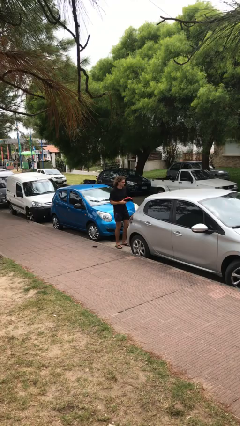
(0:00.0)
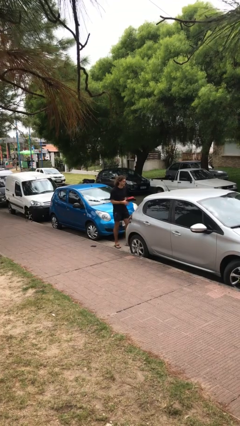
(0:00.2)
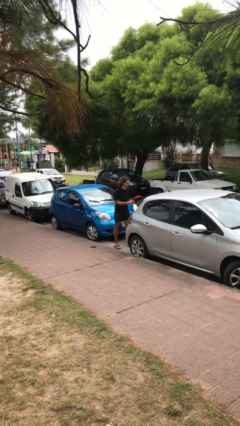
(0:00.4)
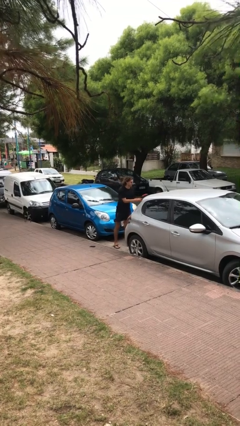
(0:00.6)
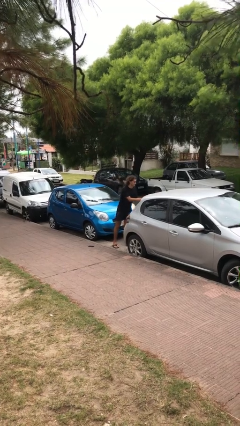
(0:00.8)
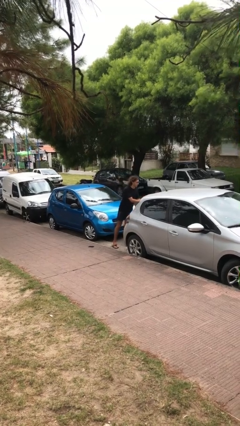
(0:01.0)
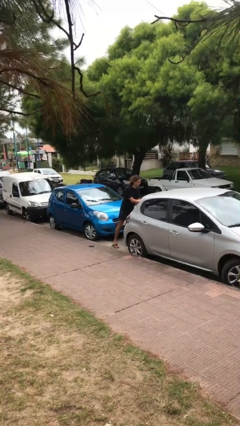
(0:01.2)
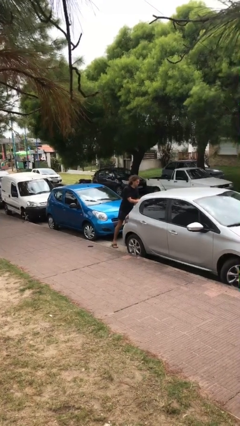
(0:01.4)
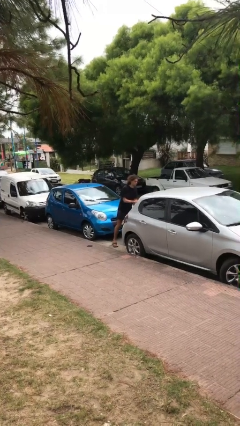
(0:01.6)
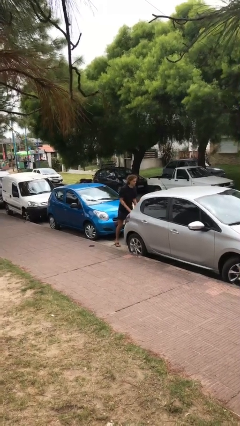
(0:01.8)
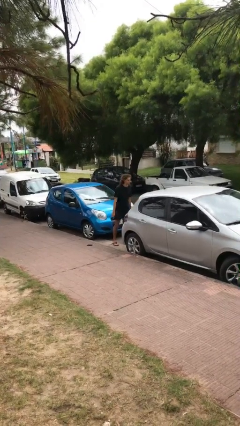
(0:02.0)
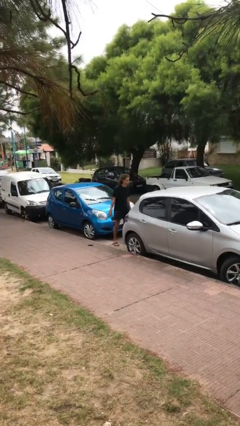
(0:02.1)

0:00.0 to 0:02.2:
person loads car

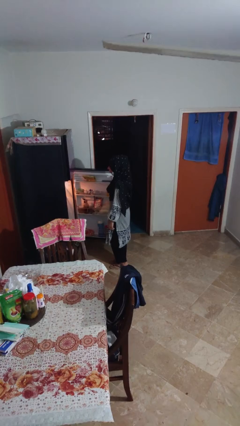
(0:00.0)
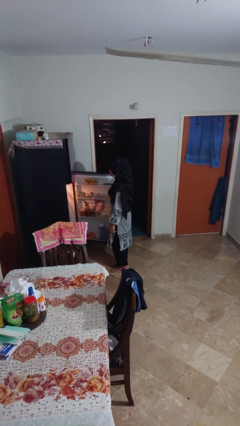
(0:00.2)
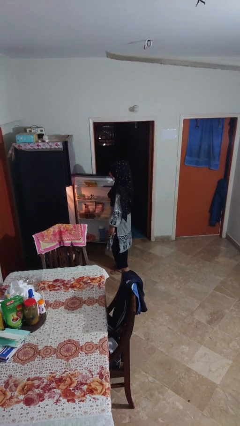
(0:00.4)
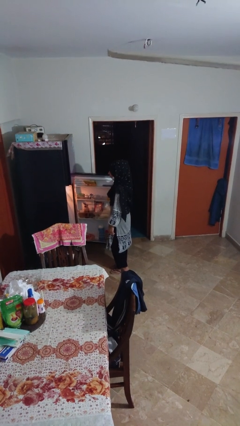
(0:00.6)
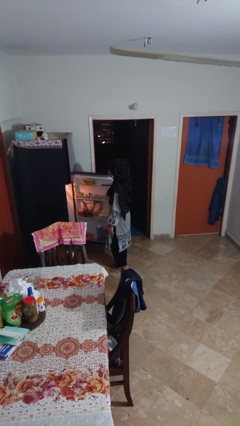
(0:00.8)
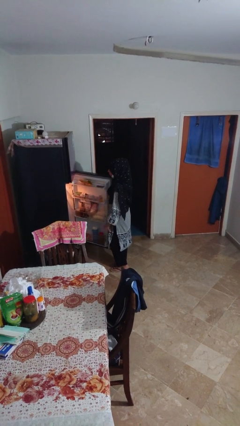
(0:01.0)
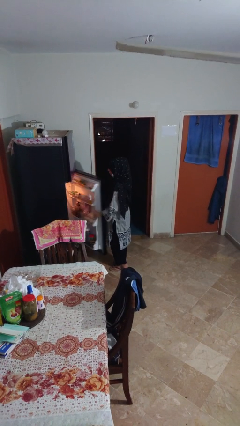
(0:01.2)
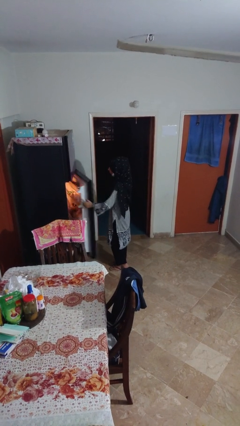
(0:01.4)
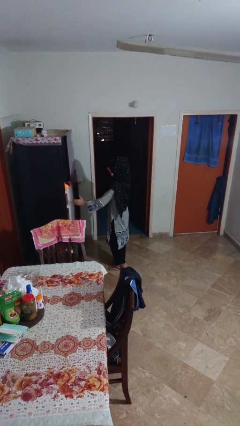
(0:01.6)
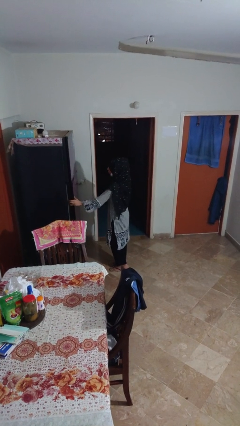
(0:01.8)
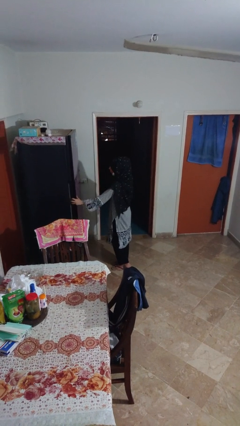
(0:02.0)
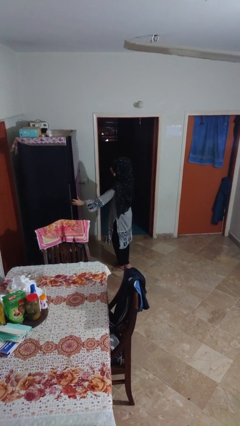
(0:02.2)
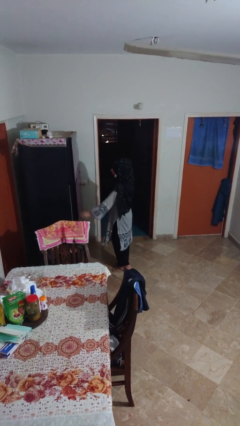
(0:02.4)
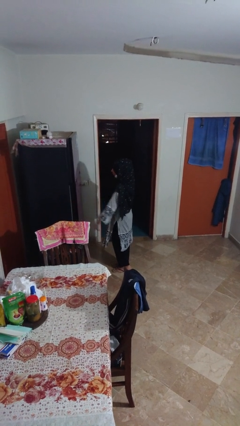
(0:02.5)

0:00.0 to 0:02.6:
person closes refrigerator

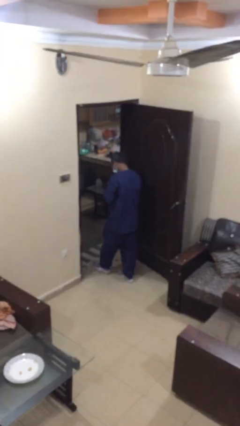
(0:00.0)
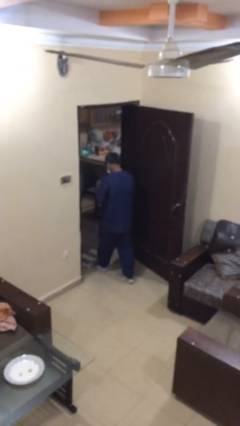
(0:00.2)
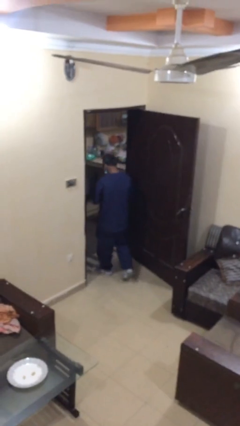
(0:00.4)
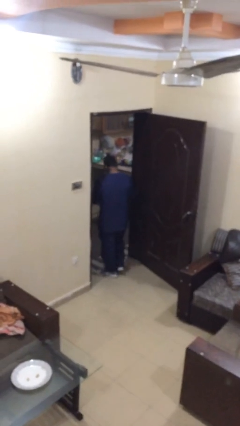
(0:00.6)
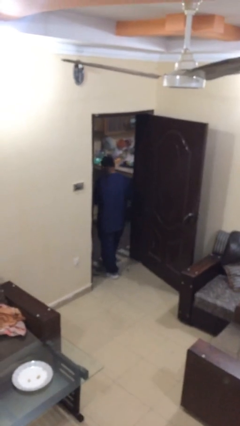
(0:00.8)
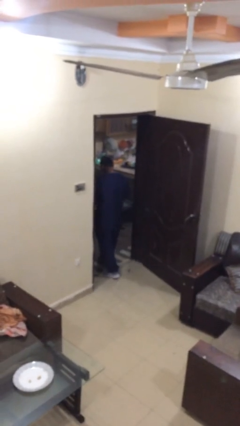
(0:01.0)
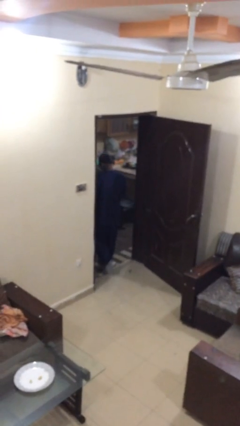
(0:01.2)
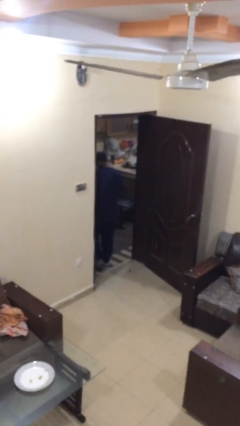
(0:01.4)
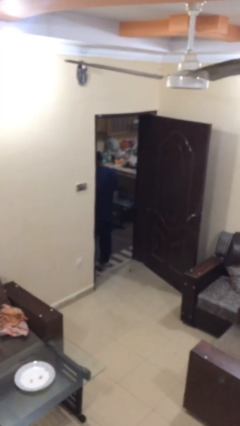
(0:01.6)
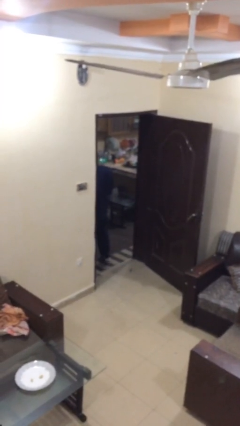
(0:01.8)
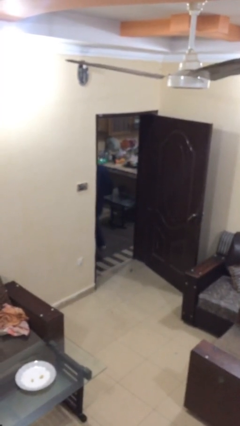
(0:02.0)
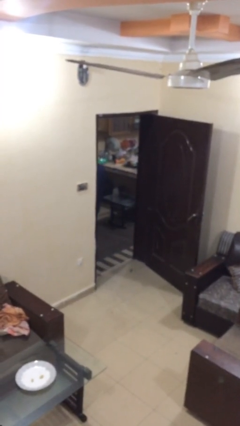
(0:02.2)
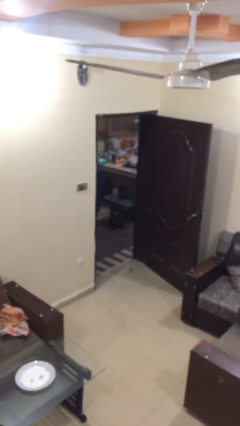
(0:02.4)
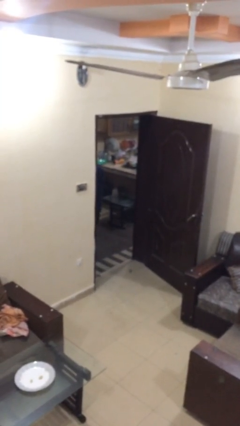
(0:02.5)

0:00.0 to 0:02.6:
person exits scene through structure

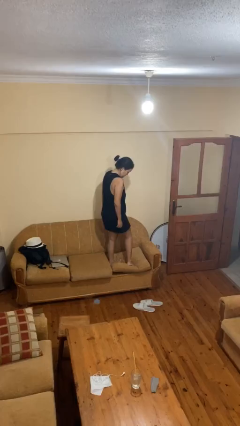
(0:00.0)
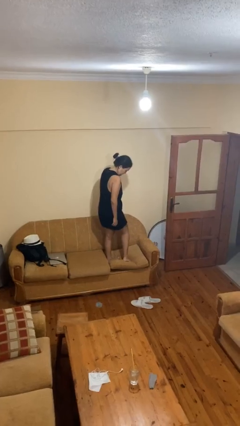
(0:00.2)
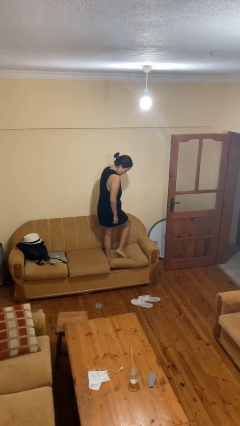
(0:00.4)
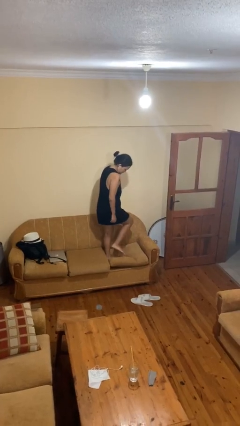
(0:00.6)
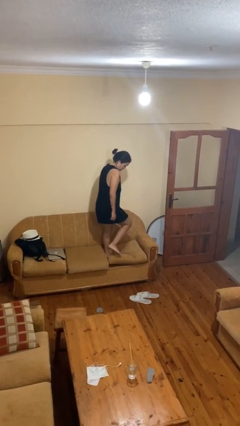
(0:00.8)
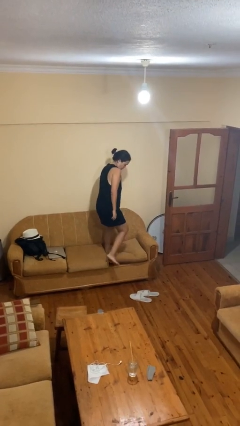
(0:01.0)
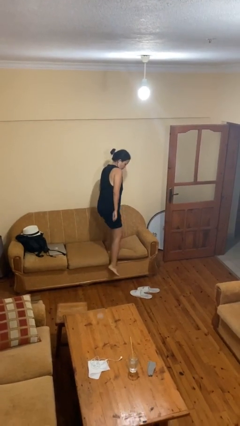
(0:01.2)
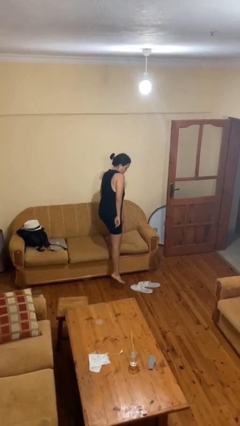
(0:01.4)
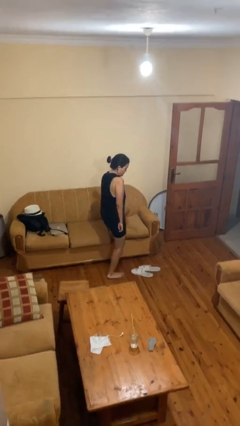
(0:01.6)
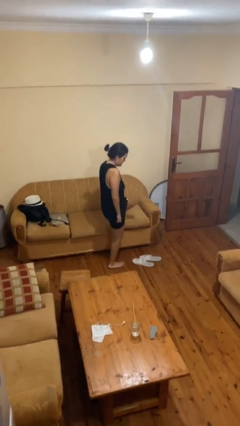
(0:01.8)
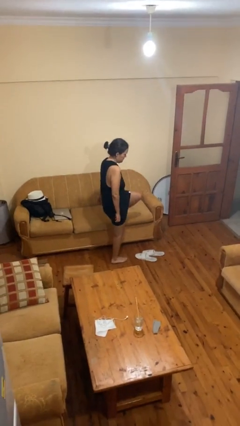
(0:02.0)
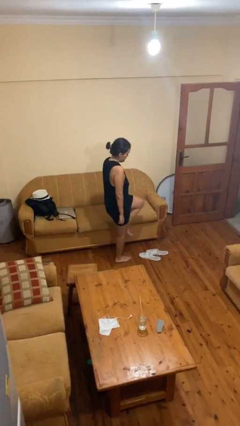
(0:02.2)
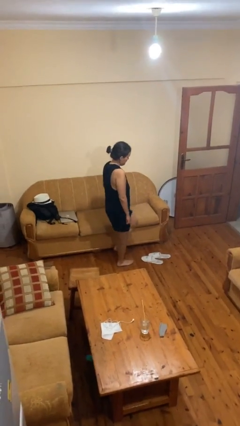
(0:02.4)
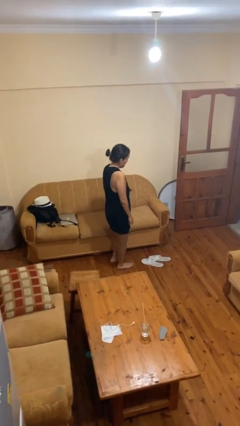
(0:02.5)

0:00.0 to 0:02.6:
person climbs off couch

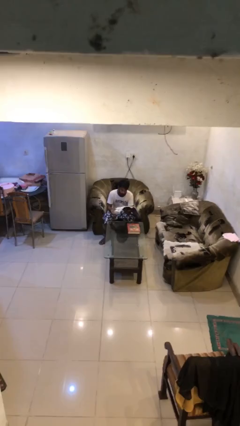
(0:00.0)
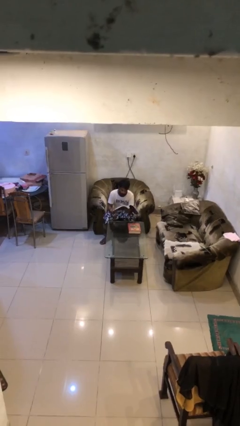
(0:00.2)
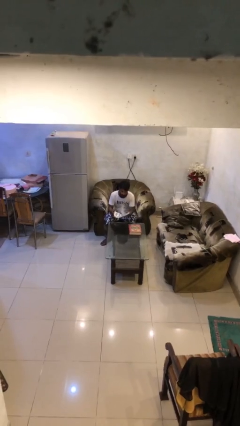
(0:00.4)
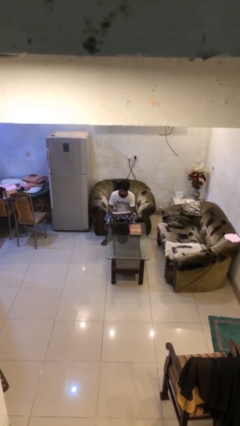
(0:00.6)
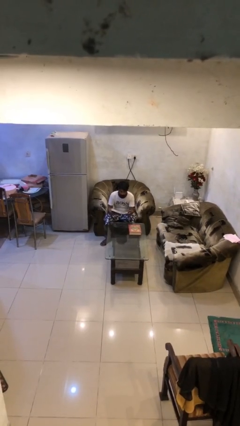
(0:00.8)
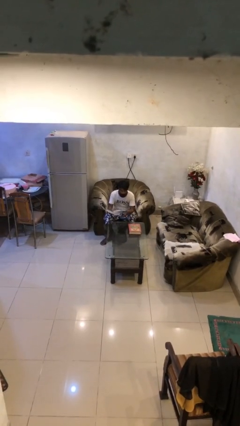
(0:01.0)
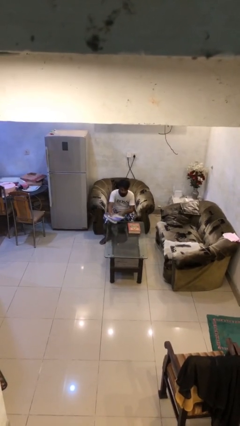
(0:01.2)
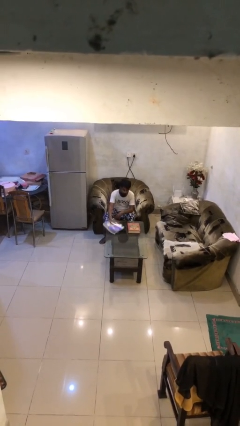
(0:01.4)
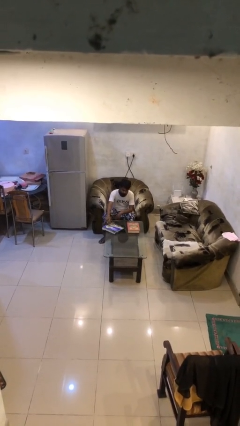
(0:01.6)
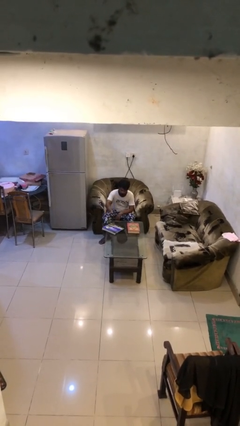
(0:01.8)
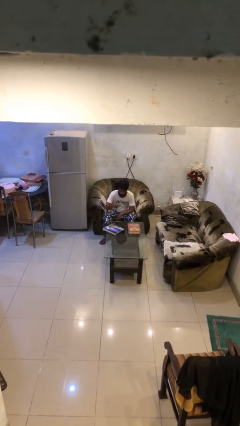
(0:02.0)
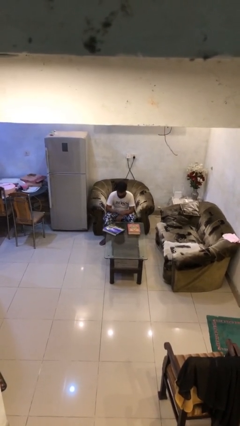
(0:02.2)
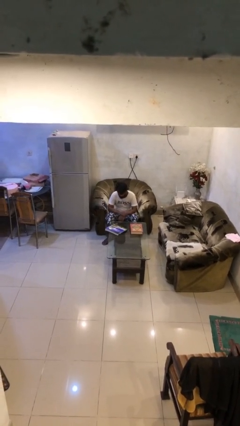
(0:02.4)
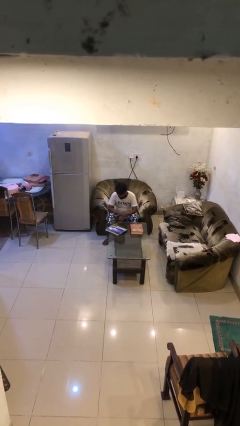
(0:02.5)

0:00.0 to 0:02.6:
person puts down object on table

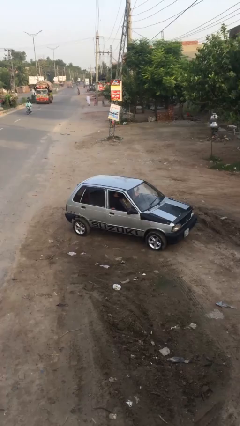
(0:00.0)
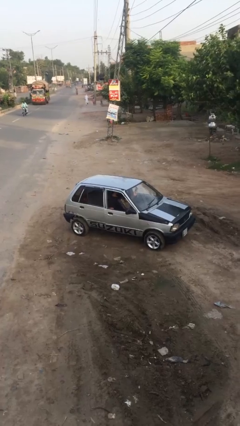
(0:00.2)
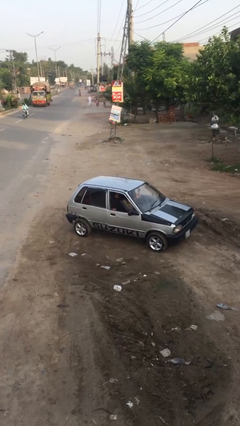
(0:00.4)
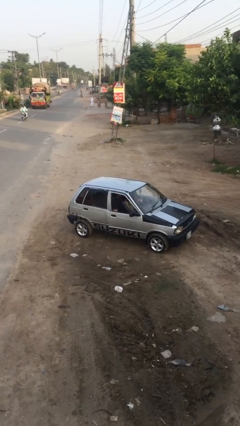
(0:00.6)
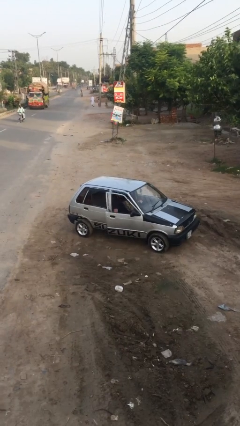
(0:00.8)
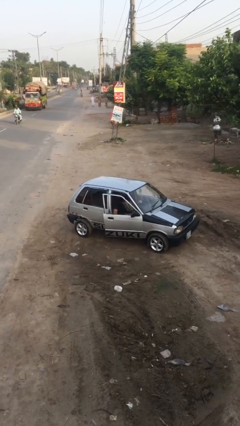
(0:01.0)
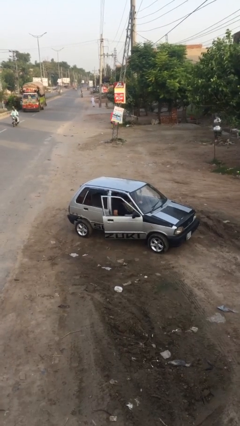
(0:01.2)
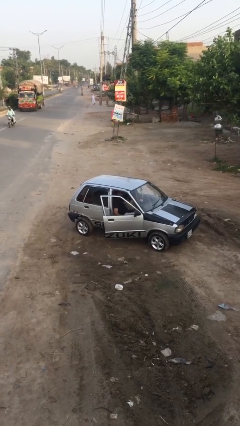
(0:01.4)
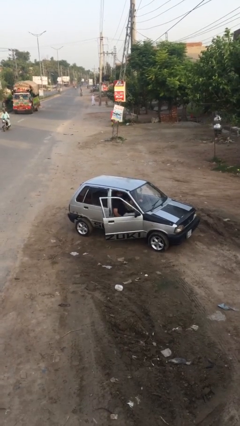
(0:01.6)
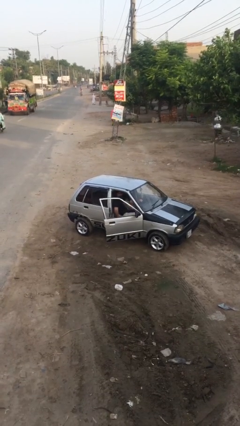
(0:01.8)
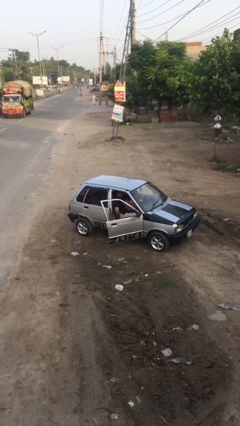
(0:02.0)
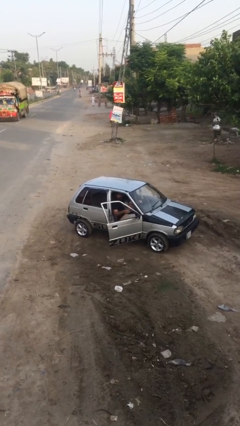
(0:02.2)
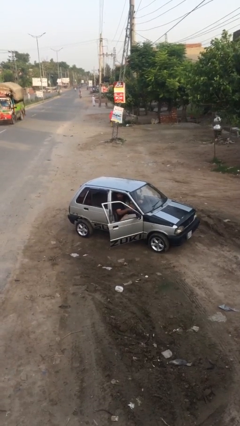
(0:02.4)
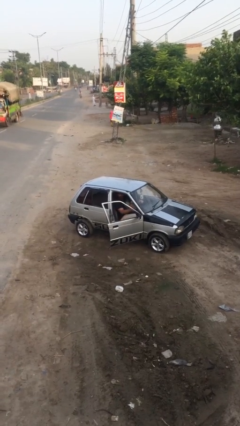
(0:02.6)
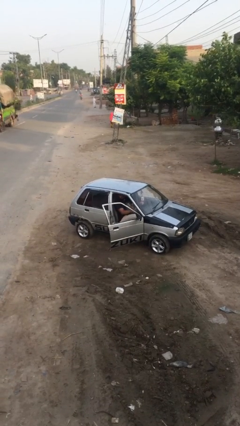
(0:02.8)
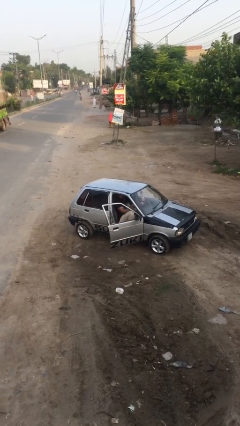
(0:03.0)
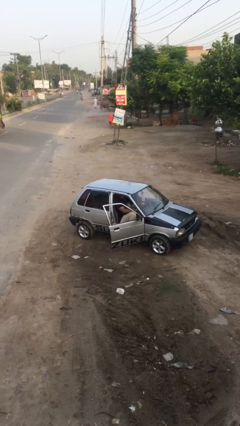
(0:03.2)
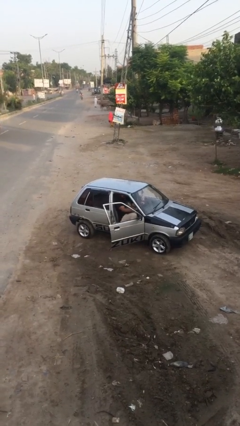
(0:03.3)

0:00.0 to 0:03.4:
person opens car door

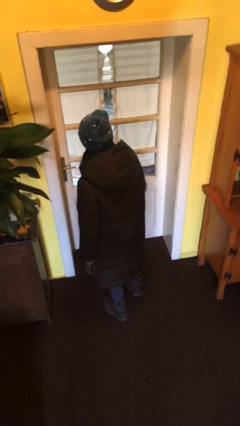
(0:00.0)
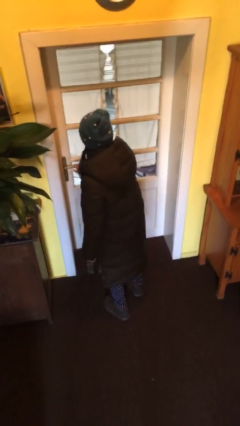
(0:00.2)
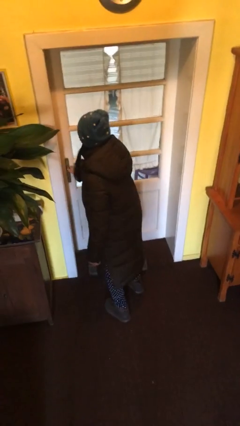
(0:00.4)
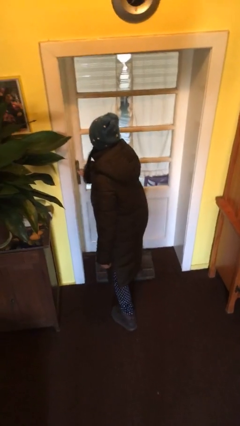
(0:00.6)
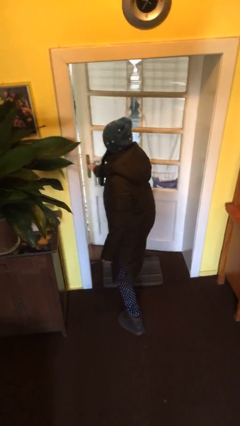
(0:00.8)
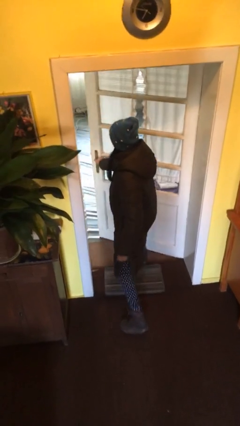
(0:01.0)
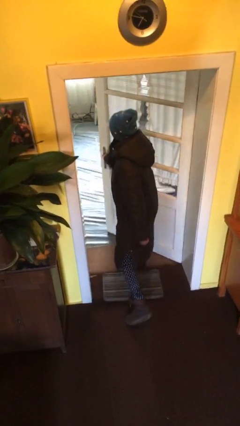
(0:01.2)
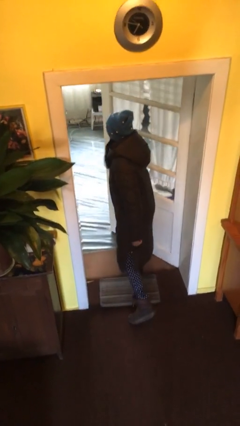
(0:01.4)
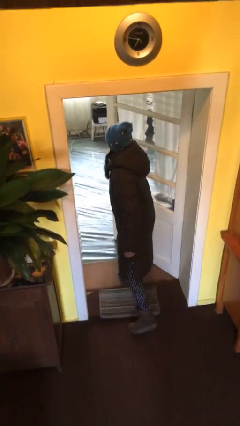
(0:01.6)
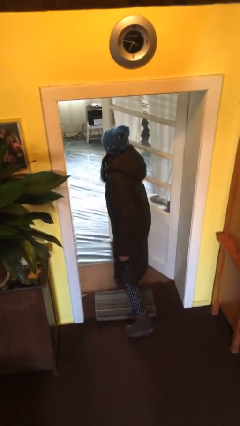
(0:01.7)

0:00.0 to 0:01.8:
person opens facility door
